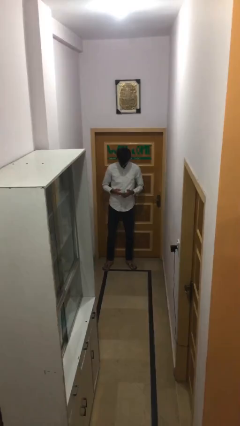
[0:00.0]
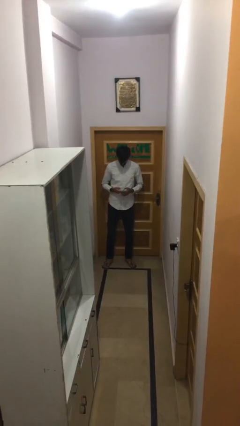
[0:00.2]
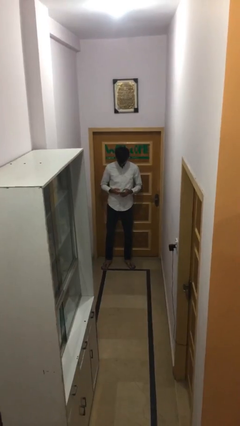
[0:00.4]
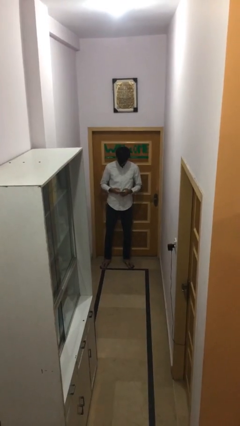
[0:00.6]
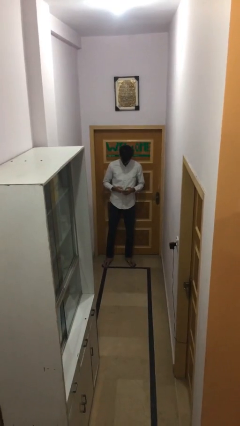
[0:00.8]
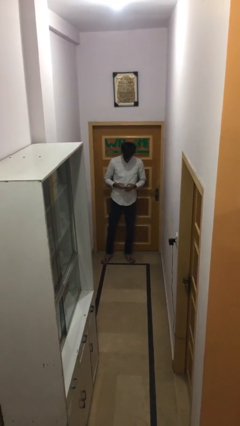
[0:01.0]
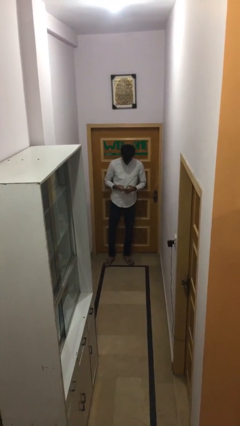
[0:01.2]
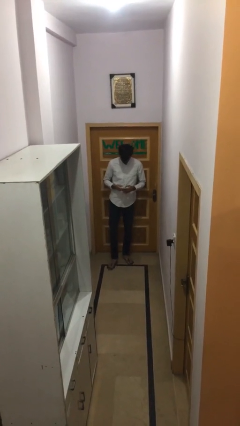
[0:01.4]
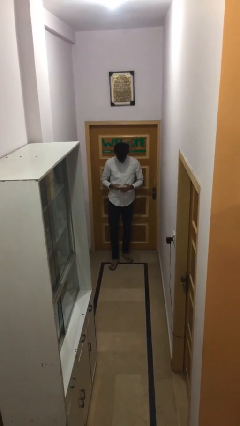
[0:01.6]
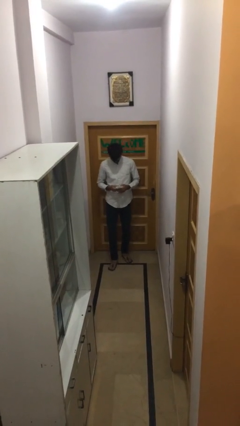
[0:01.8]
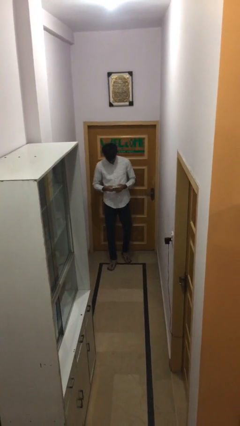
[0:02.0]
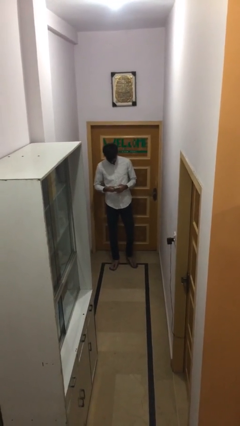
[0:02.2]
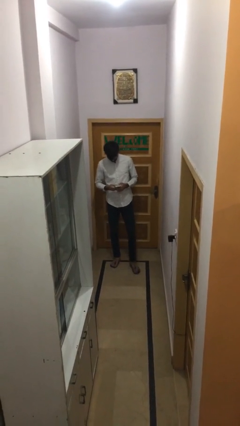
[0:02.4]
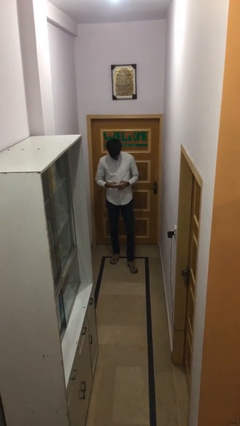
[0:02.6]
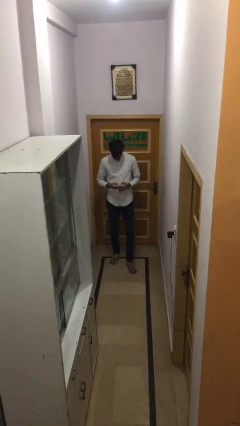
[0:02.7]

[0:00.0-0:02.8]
person texts on phone

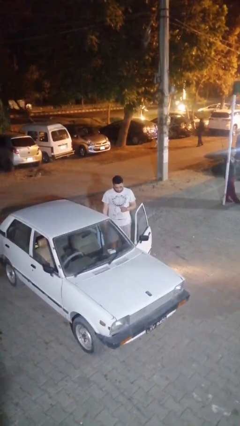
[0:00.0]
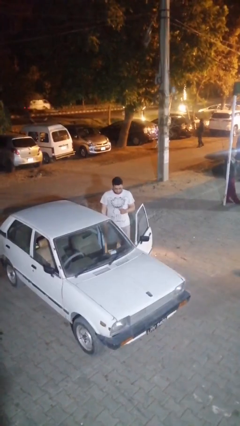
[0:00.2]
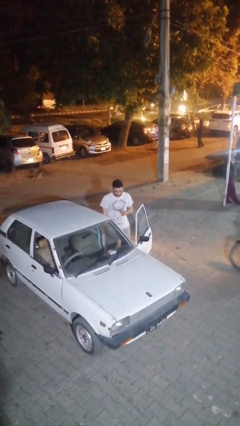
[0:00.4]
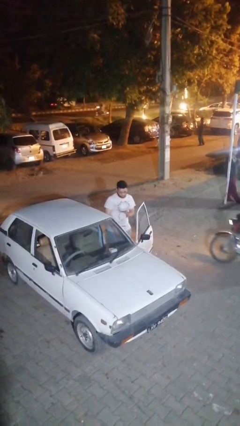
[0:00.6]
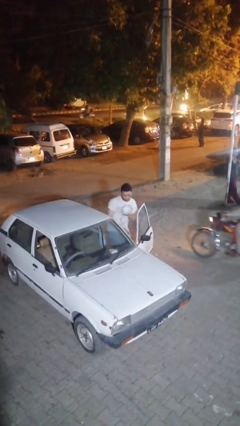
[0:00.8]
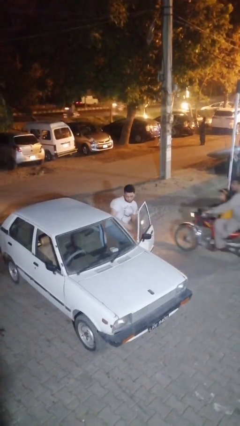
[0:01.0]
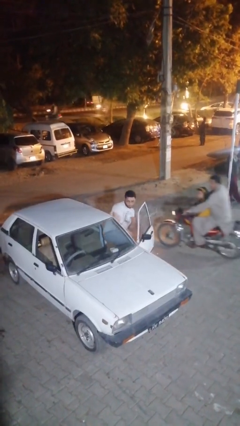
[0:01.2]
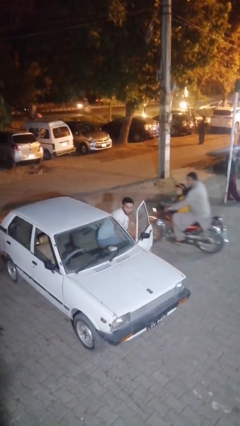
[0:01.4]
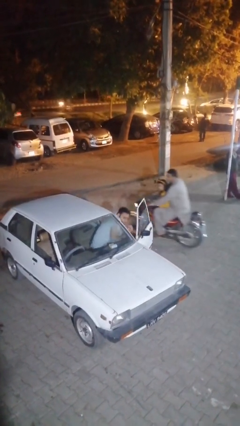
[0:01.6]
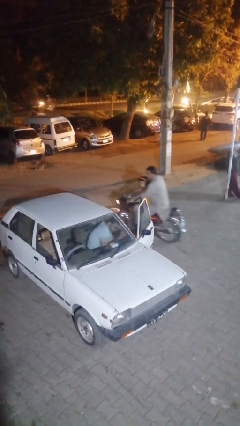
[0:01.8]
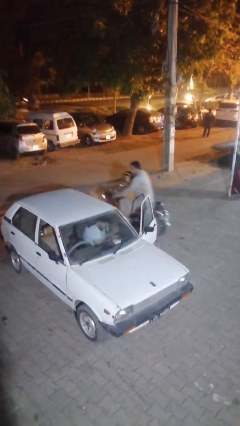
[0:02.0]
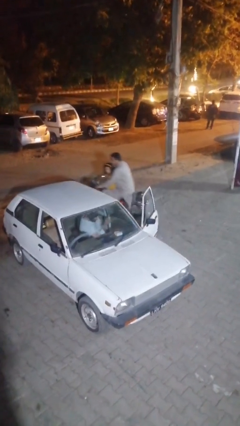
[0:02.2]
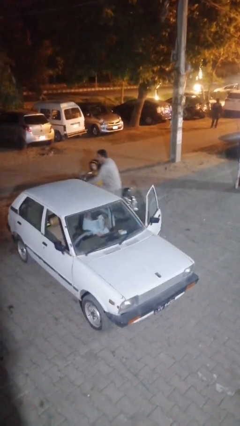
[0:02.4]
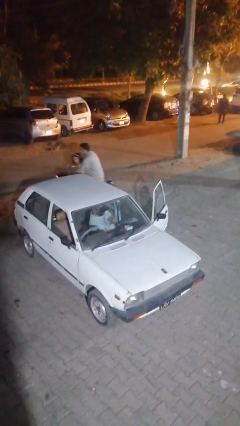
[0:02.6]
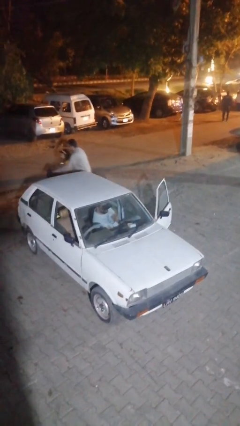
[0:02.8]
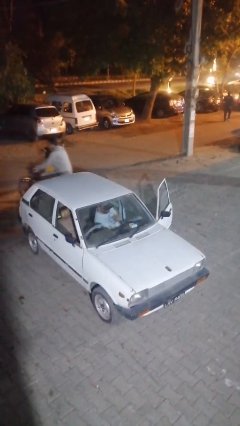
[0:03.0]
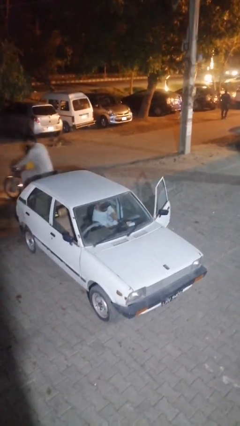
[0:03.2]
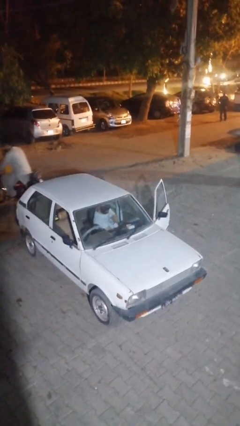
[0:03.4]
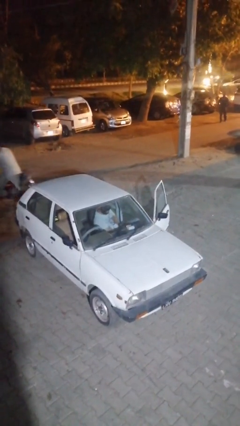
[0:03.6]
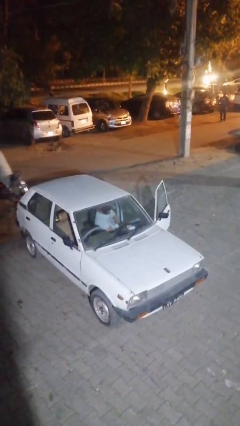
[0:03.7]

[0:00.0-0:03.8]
person enters car

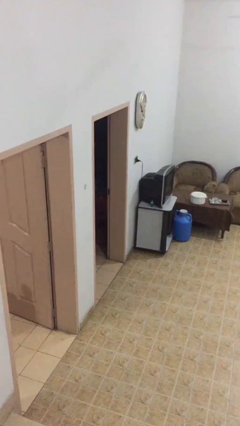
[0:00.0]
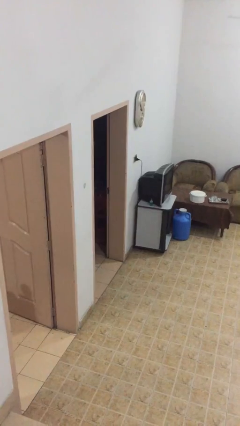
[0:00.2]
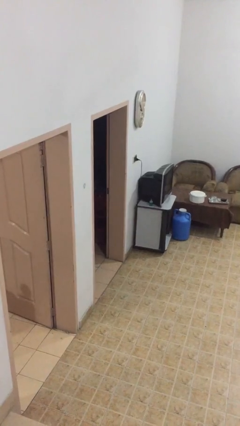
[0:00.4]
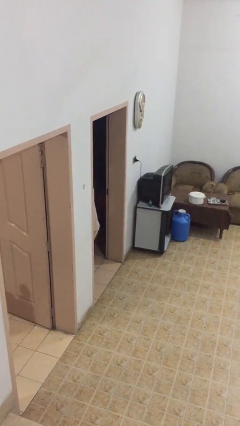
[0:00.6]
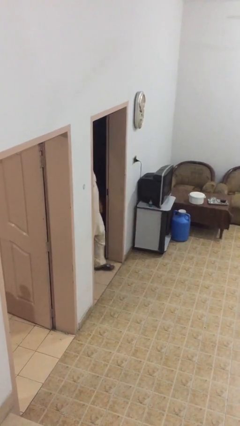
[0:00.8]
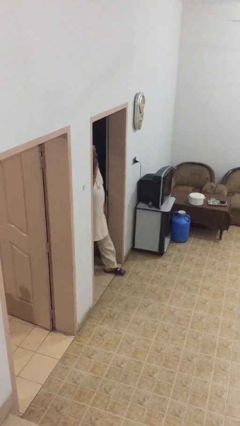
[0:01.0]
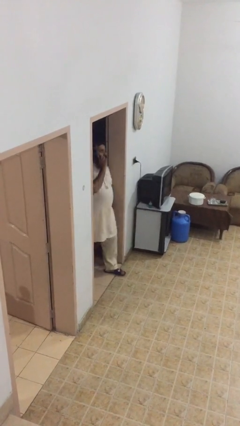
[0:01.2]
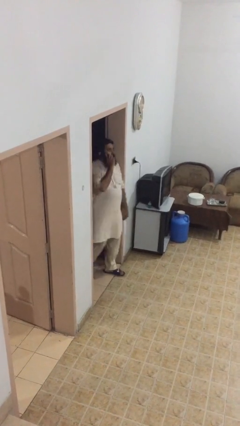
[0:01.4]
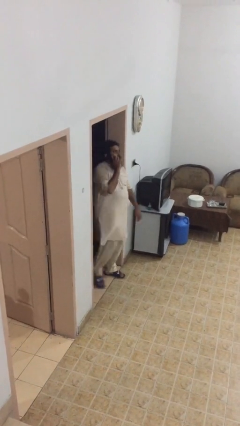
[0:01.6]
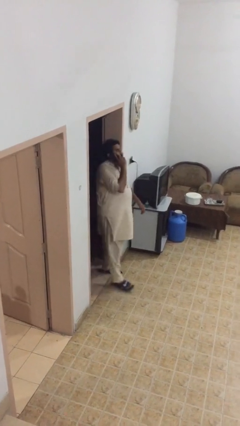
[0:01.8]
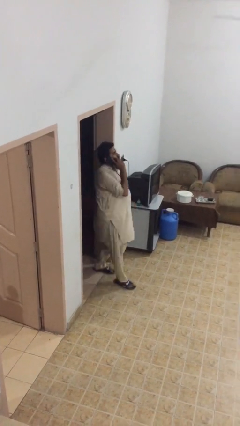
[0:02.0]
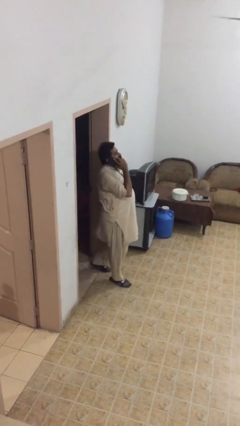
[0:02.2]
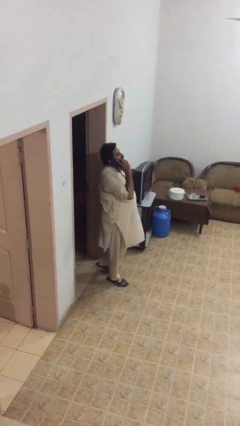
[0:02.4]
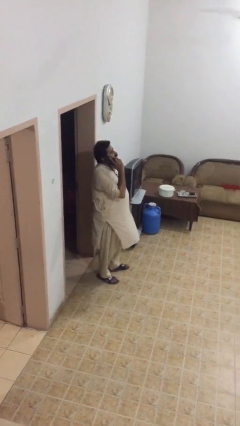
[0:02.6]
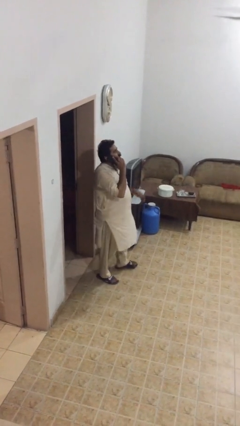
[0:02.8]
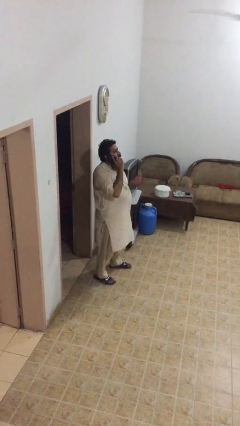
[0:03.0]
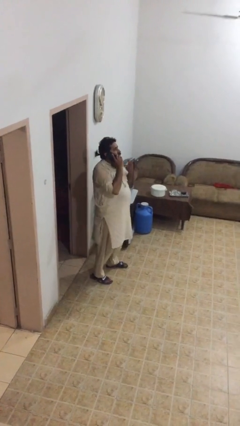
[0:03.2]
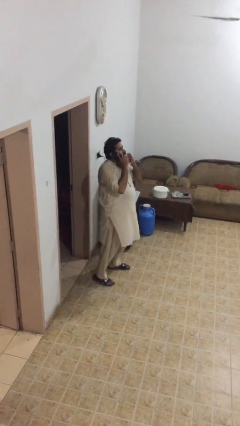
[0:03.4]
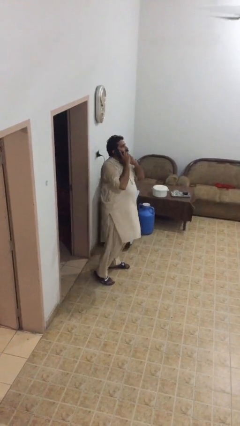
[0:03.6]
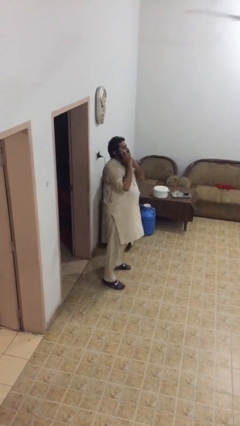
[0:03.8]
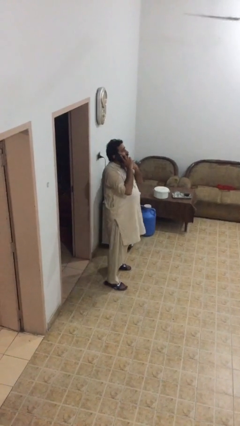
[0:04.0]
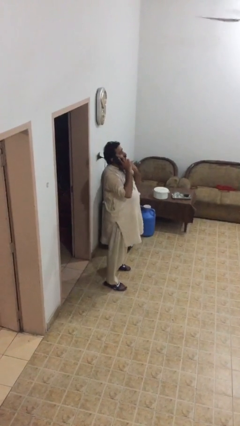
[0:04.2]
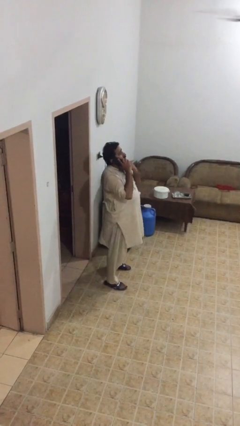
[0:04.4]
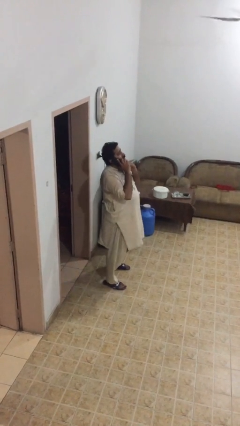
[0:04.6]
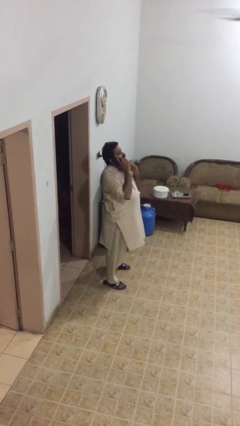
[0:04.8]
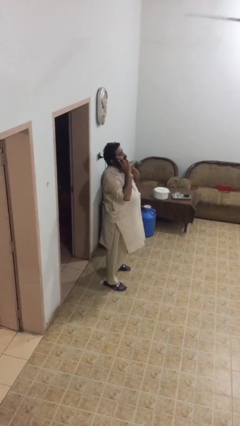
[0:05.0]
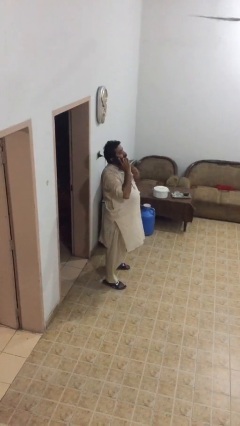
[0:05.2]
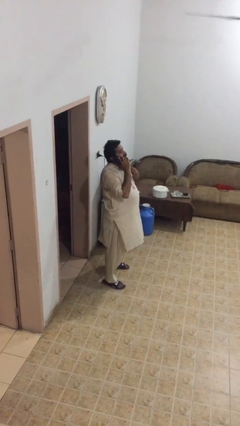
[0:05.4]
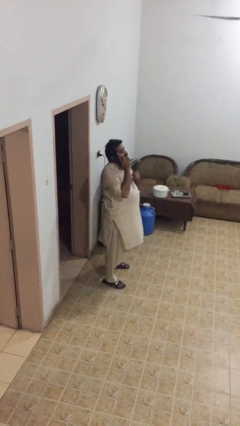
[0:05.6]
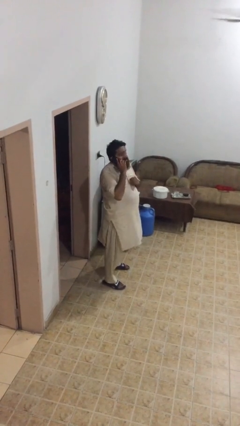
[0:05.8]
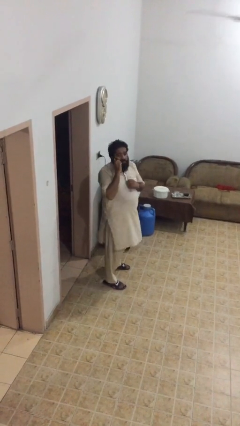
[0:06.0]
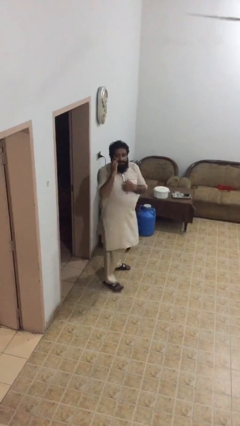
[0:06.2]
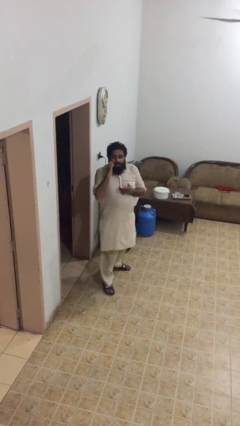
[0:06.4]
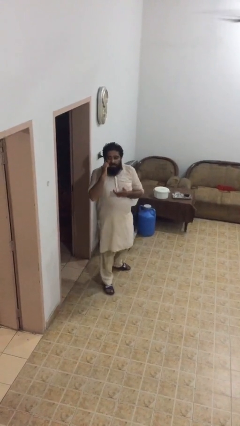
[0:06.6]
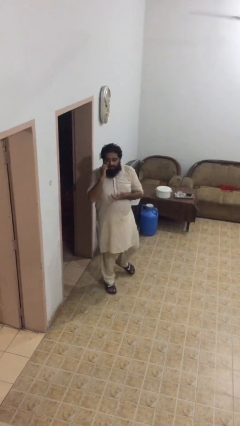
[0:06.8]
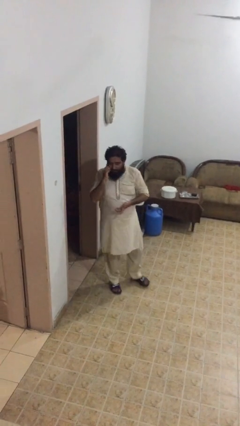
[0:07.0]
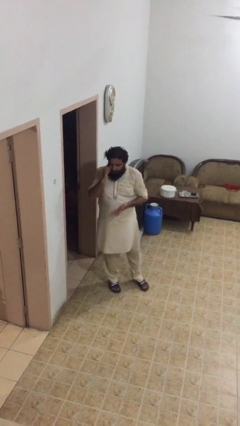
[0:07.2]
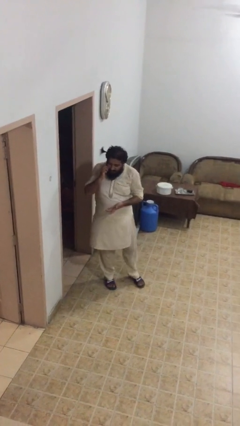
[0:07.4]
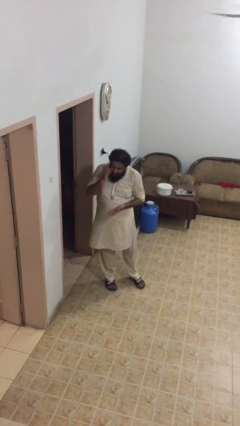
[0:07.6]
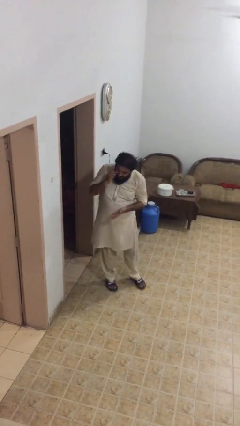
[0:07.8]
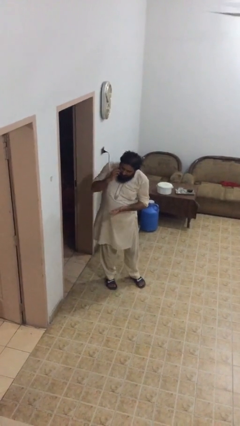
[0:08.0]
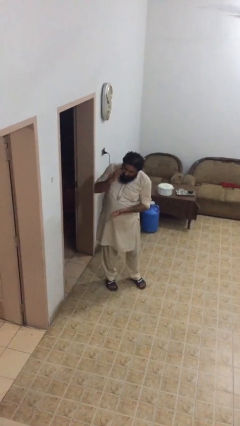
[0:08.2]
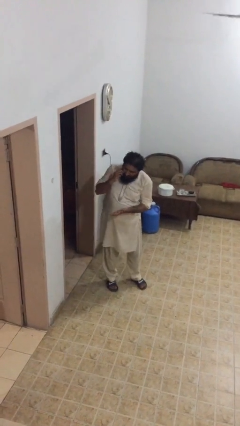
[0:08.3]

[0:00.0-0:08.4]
person enters scene through structure

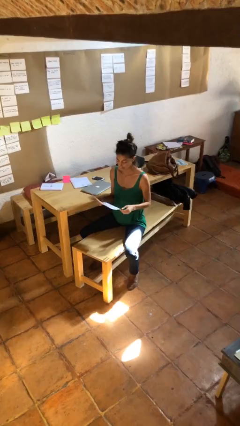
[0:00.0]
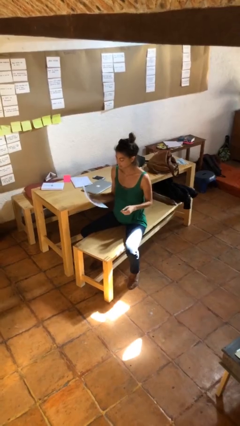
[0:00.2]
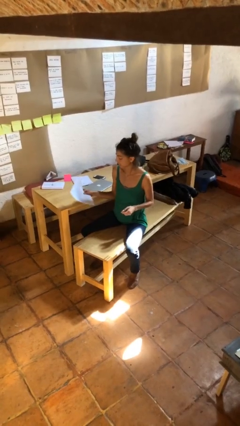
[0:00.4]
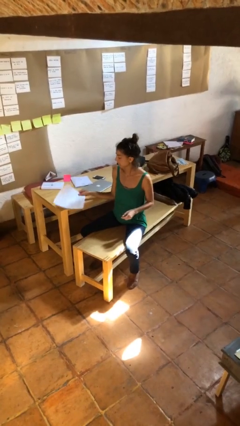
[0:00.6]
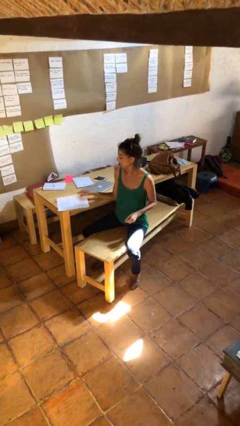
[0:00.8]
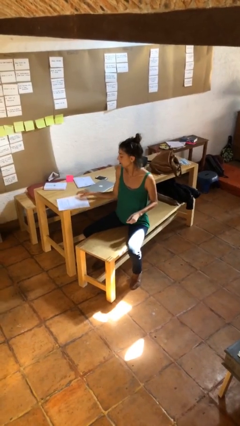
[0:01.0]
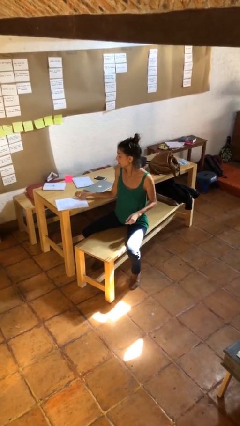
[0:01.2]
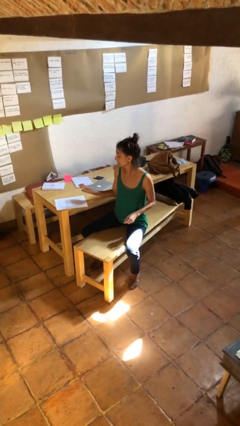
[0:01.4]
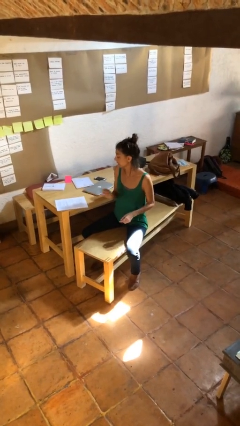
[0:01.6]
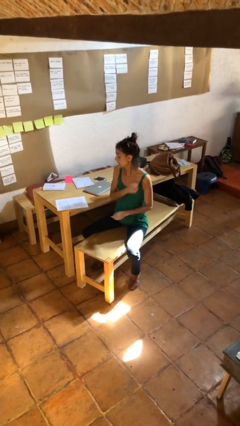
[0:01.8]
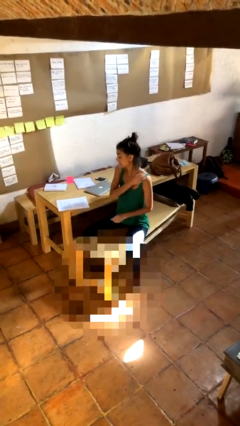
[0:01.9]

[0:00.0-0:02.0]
person puts down object on table

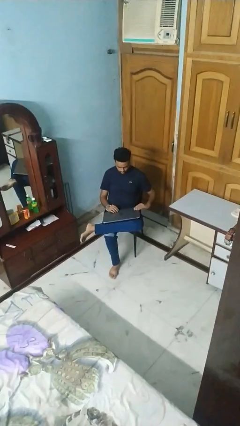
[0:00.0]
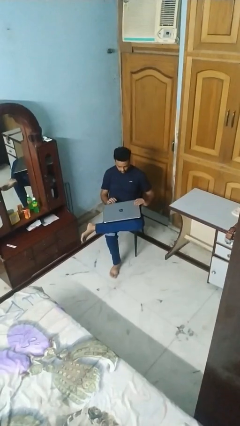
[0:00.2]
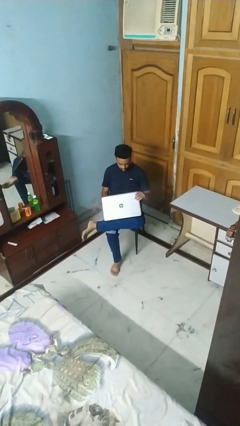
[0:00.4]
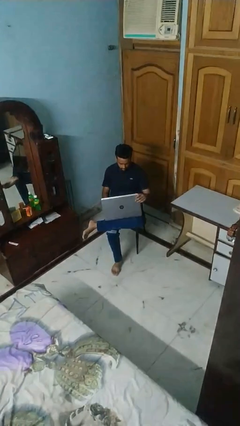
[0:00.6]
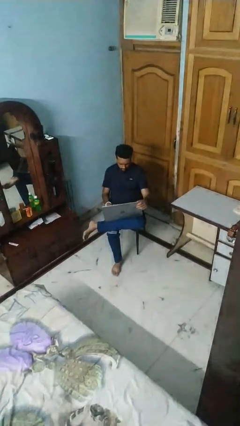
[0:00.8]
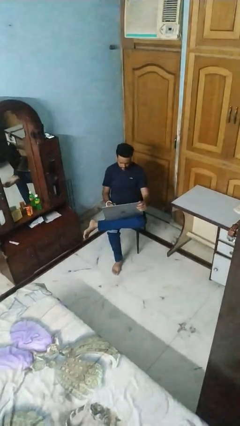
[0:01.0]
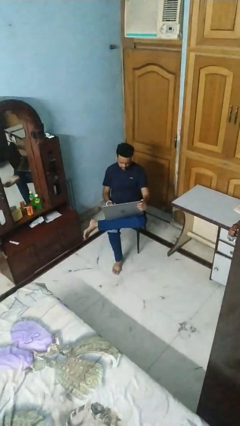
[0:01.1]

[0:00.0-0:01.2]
person opens laptop
